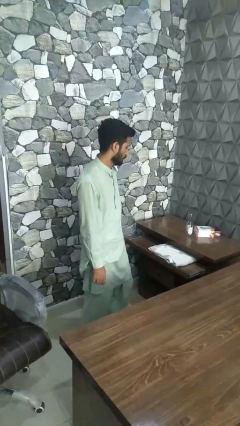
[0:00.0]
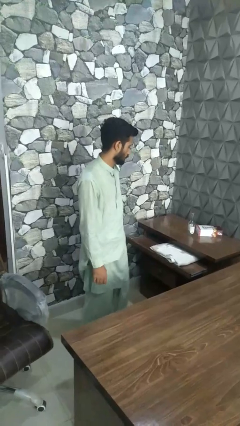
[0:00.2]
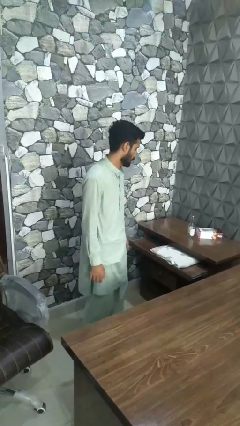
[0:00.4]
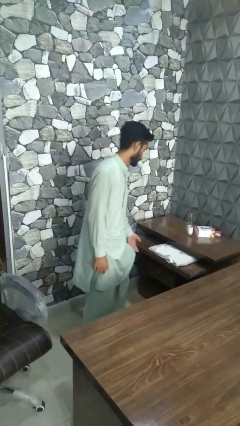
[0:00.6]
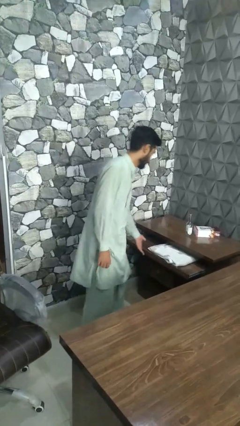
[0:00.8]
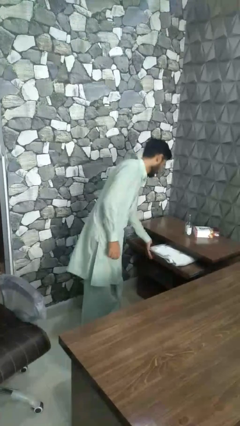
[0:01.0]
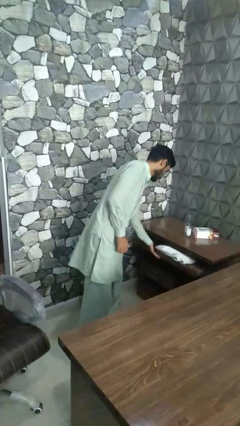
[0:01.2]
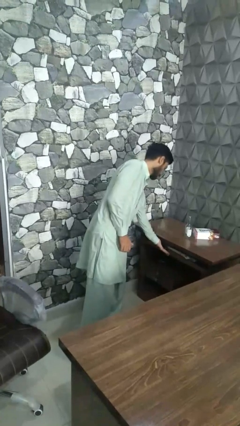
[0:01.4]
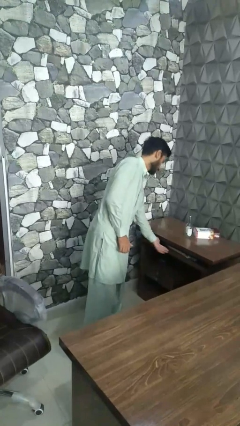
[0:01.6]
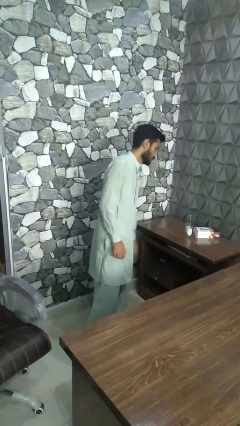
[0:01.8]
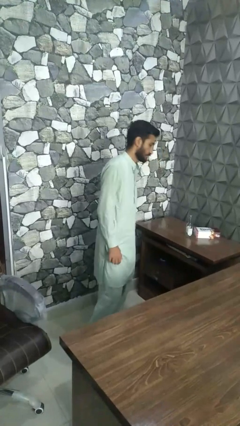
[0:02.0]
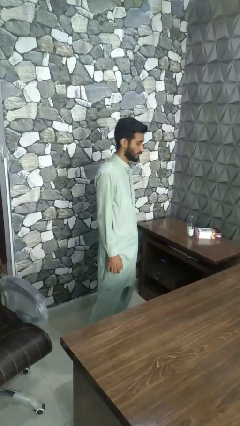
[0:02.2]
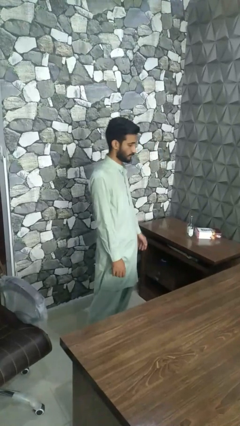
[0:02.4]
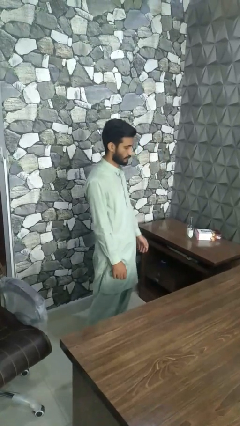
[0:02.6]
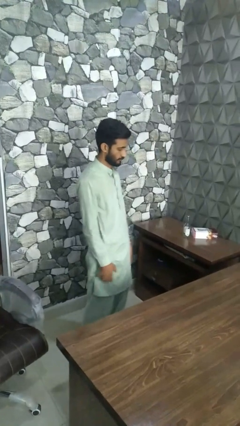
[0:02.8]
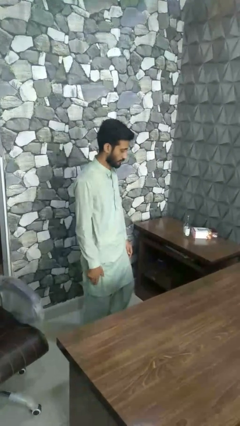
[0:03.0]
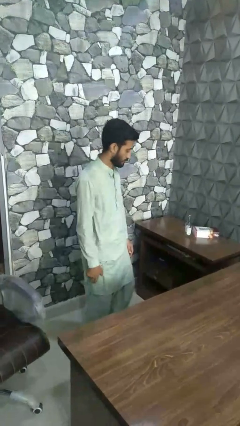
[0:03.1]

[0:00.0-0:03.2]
person closes dresser drawer

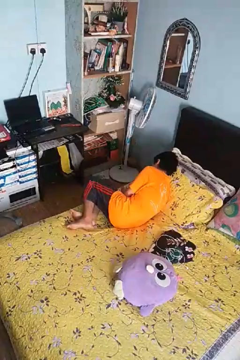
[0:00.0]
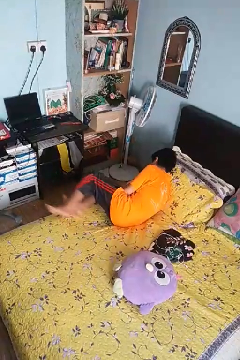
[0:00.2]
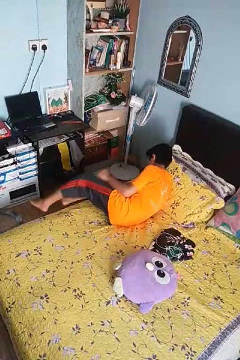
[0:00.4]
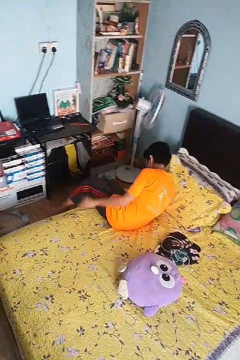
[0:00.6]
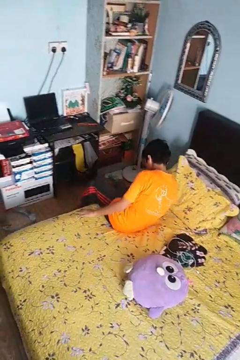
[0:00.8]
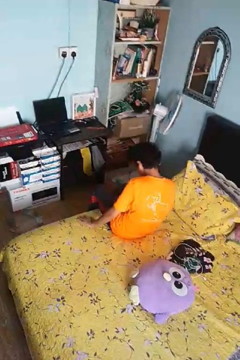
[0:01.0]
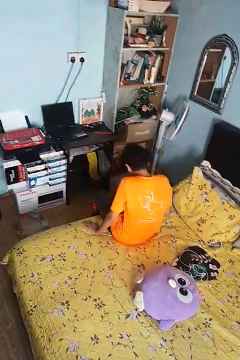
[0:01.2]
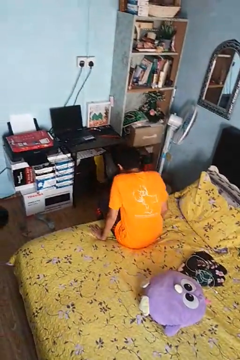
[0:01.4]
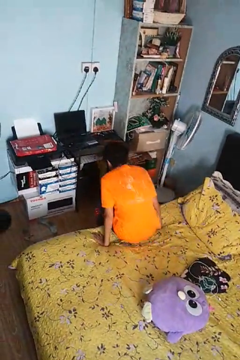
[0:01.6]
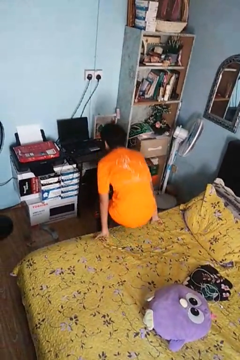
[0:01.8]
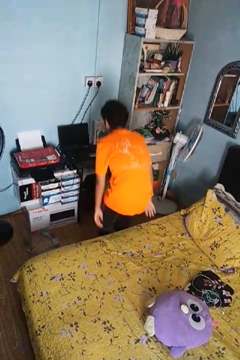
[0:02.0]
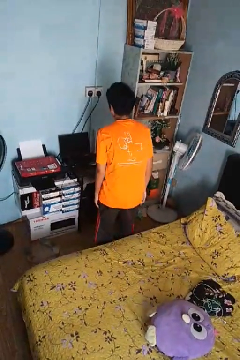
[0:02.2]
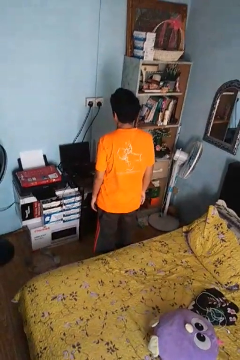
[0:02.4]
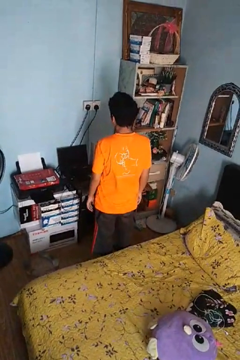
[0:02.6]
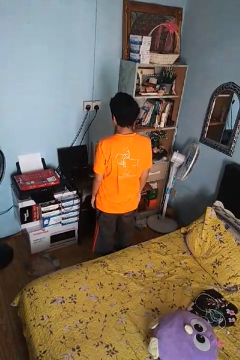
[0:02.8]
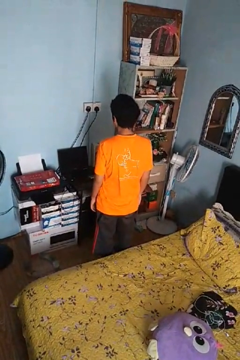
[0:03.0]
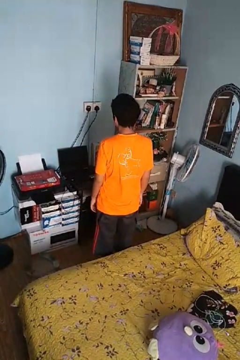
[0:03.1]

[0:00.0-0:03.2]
person stands up

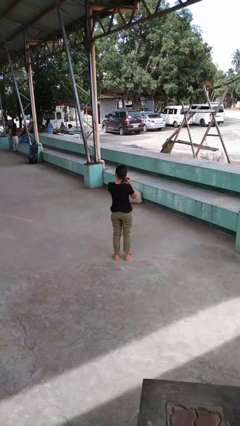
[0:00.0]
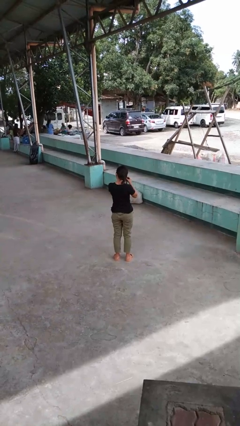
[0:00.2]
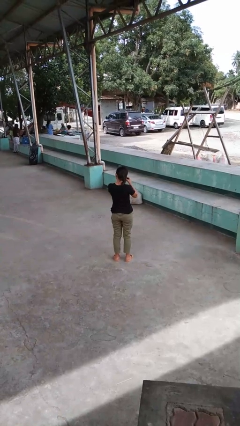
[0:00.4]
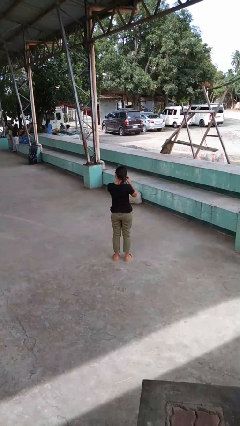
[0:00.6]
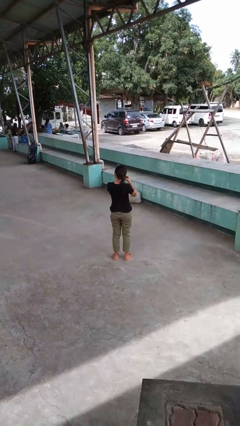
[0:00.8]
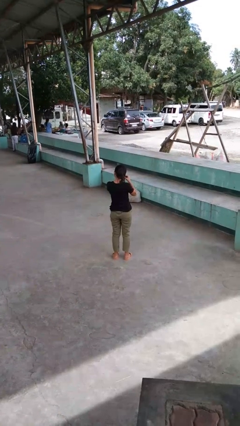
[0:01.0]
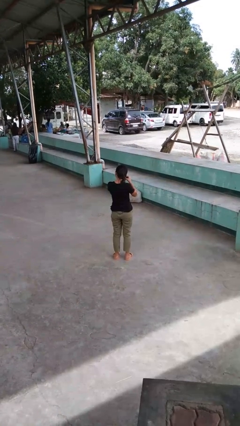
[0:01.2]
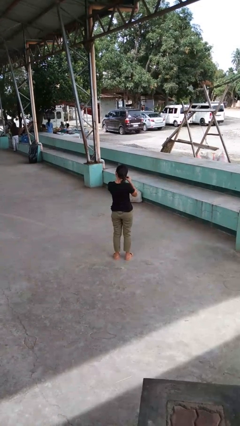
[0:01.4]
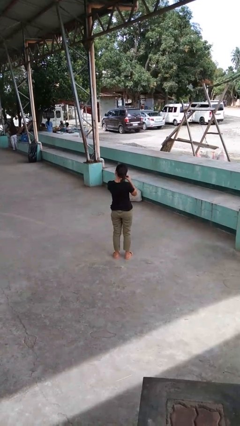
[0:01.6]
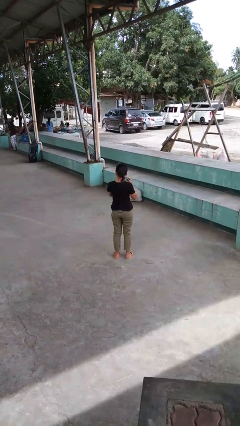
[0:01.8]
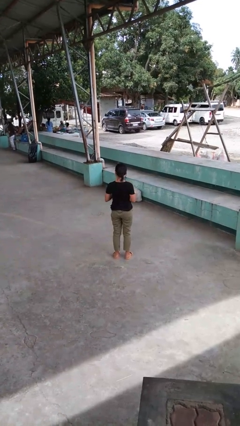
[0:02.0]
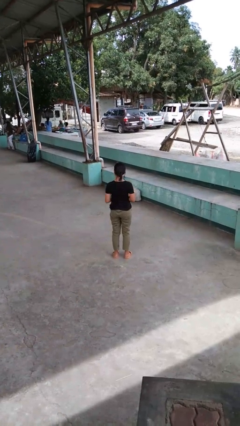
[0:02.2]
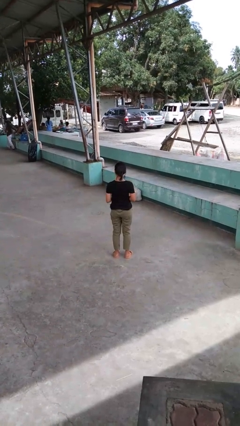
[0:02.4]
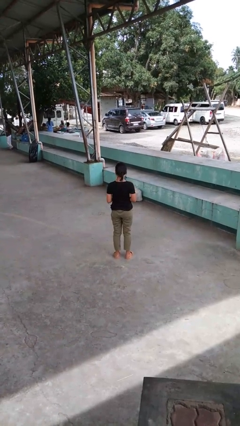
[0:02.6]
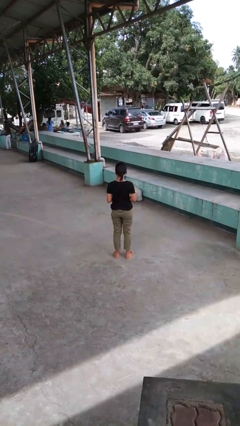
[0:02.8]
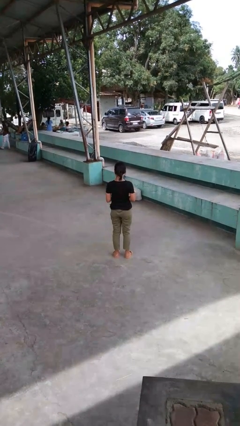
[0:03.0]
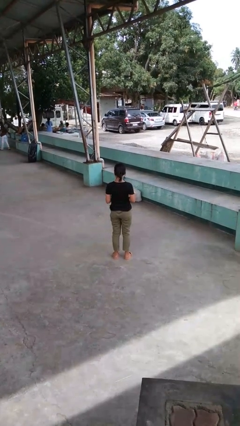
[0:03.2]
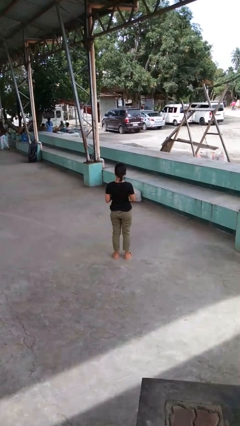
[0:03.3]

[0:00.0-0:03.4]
person puts on earrings

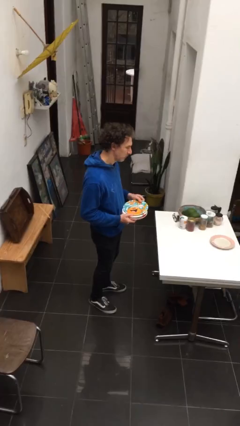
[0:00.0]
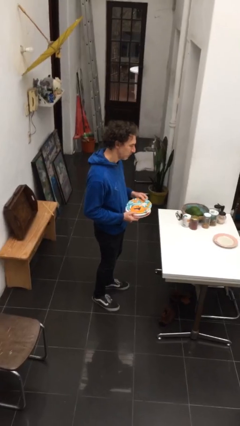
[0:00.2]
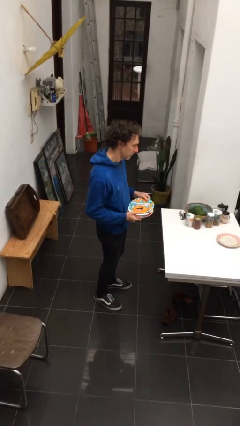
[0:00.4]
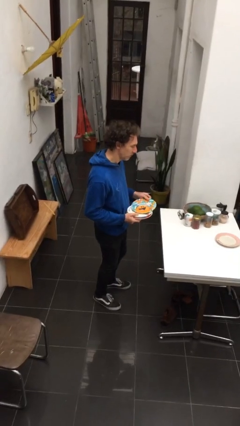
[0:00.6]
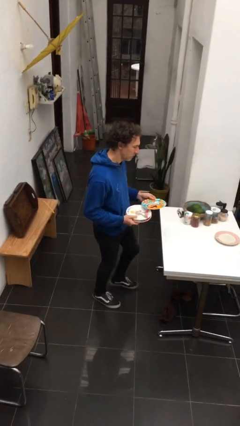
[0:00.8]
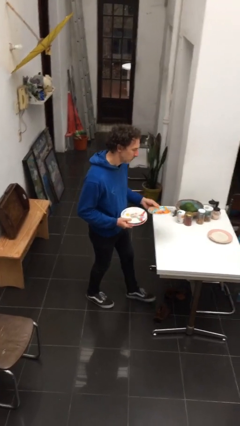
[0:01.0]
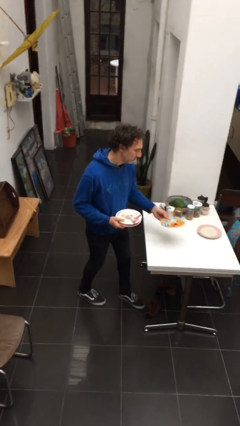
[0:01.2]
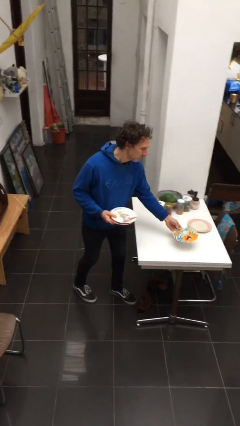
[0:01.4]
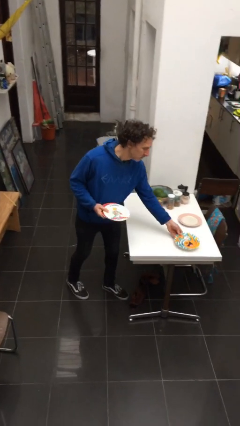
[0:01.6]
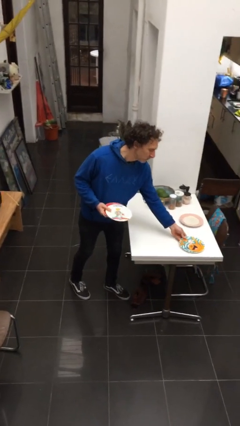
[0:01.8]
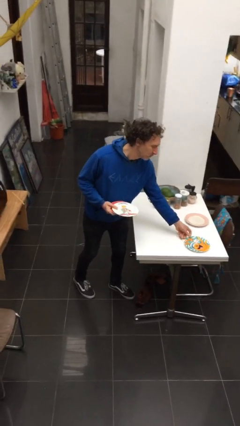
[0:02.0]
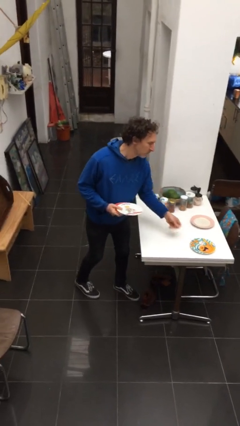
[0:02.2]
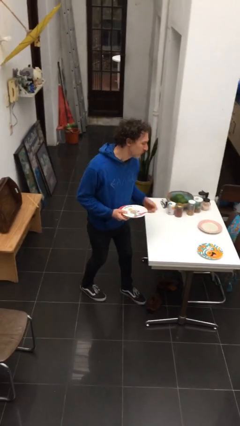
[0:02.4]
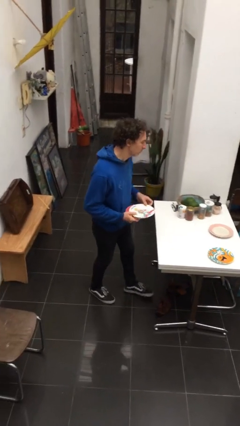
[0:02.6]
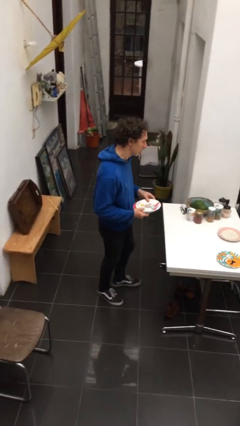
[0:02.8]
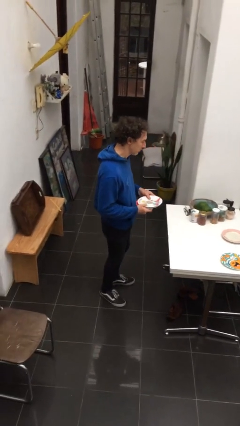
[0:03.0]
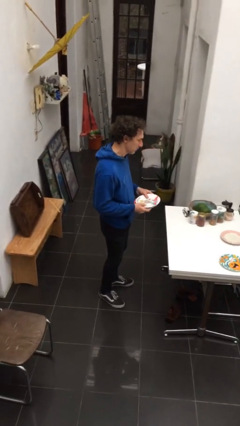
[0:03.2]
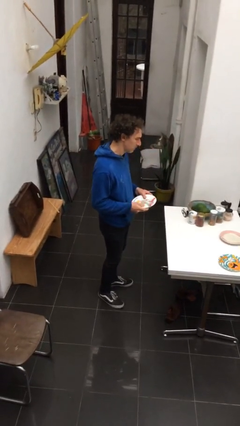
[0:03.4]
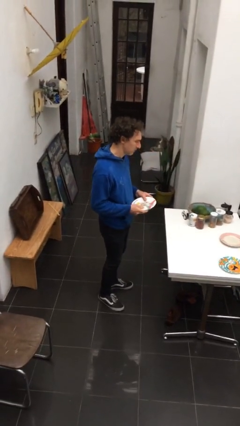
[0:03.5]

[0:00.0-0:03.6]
person sets table

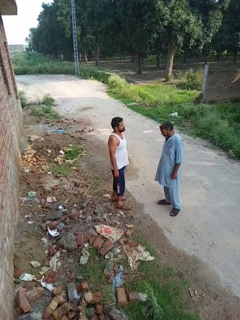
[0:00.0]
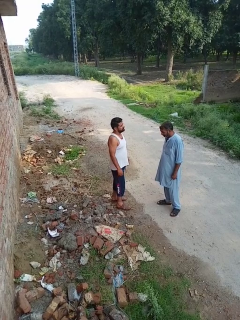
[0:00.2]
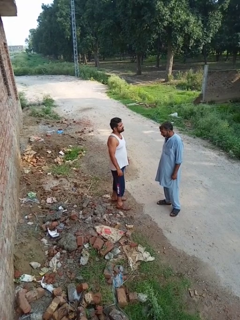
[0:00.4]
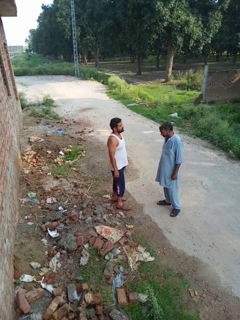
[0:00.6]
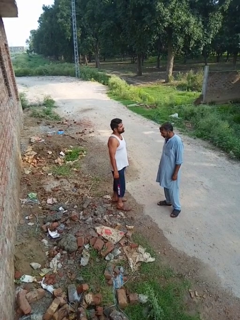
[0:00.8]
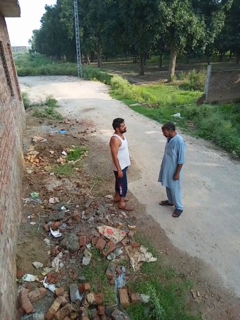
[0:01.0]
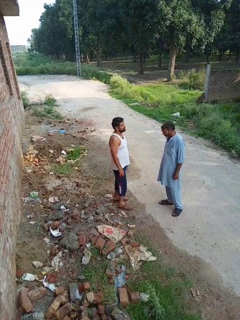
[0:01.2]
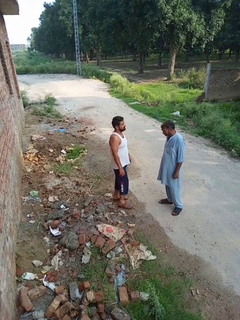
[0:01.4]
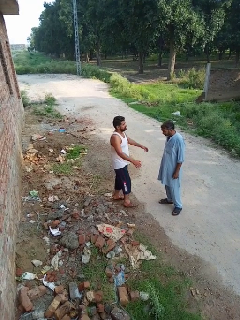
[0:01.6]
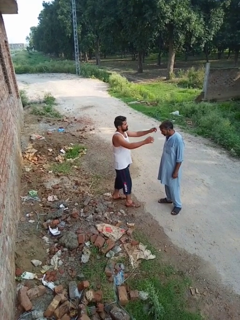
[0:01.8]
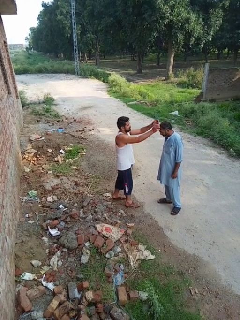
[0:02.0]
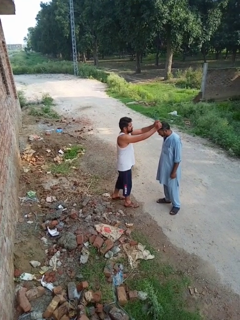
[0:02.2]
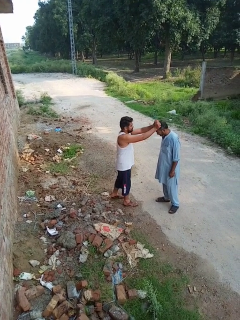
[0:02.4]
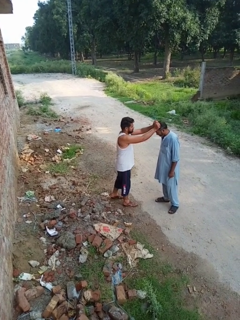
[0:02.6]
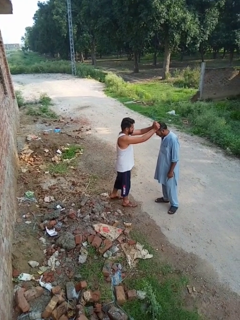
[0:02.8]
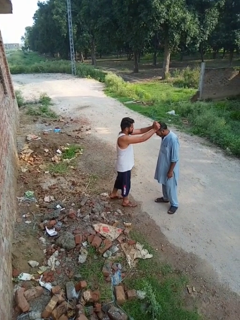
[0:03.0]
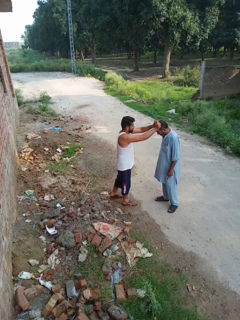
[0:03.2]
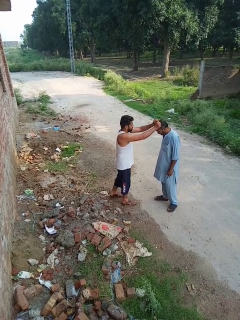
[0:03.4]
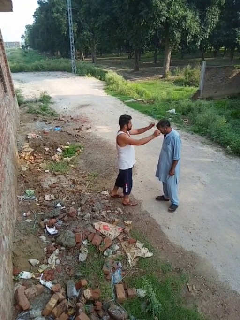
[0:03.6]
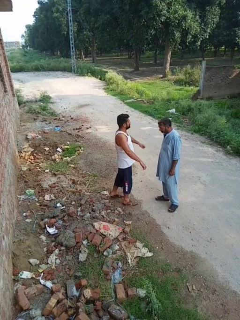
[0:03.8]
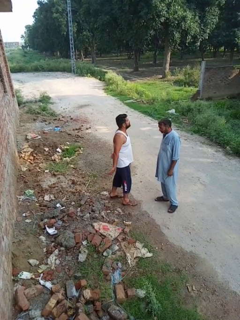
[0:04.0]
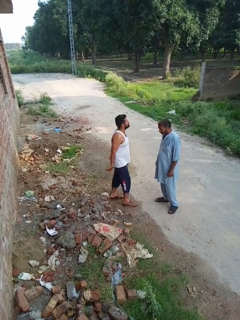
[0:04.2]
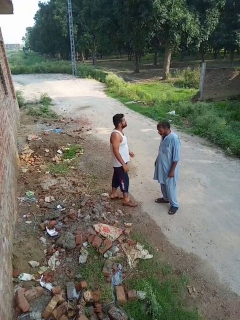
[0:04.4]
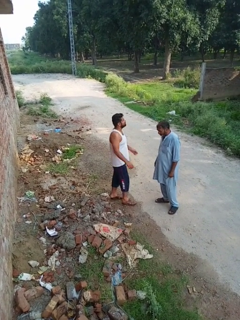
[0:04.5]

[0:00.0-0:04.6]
person grabs person by hair

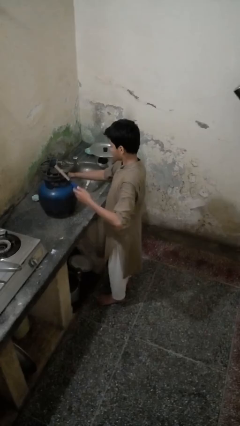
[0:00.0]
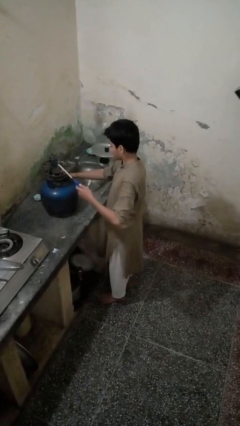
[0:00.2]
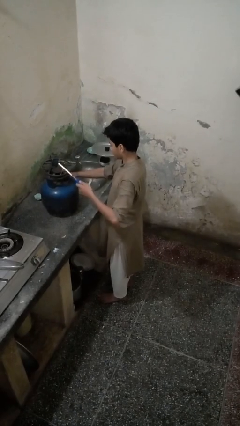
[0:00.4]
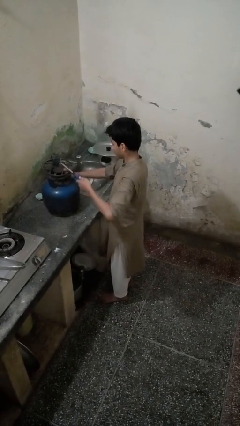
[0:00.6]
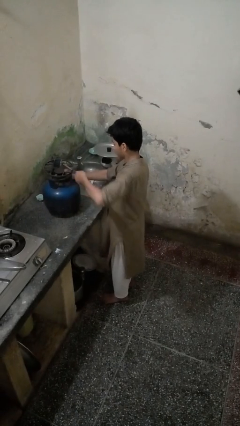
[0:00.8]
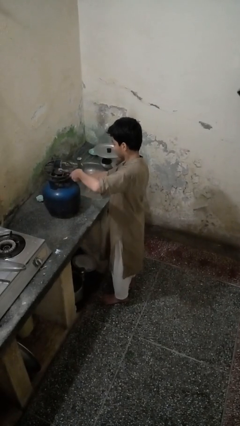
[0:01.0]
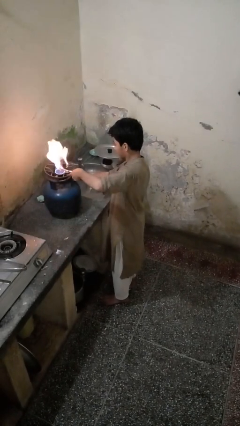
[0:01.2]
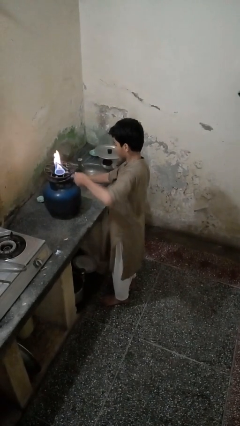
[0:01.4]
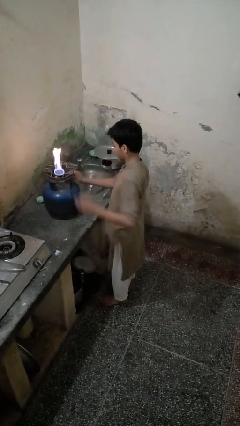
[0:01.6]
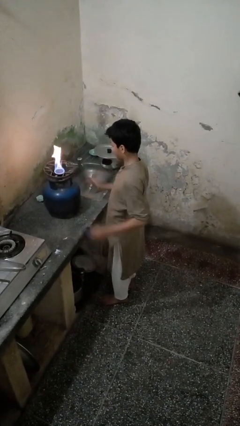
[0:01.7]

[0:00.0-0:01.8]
person turns on stovetop
